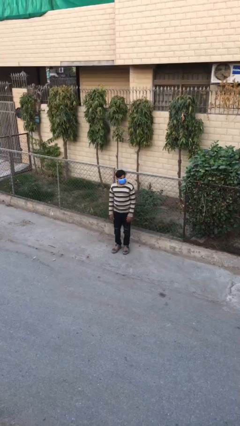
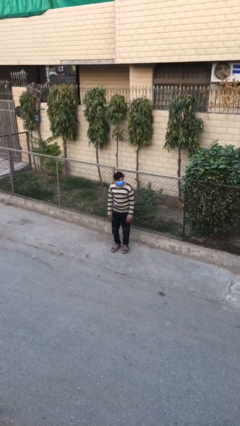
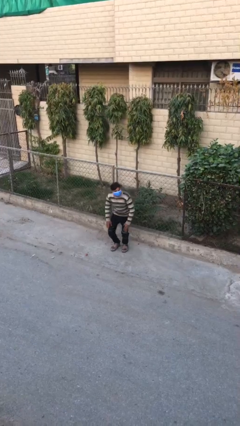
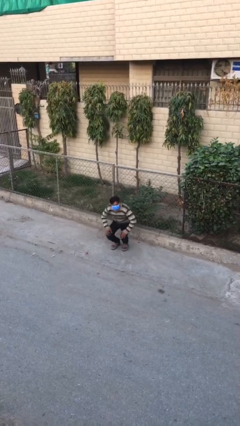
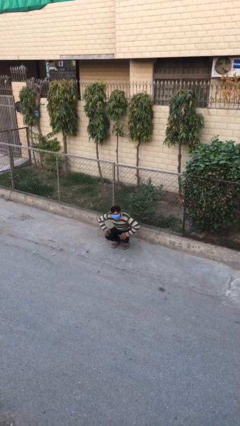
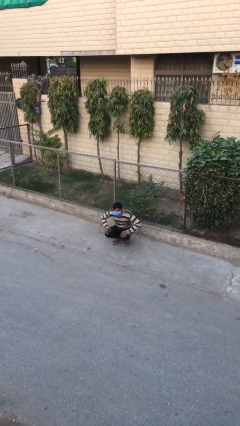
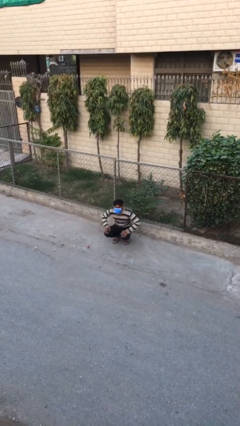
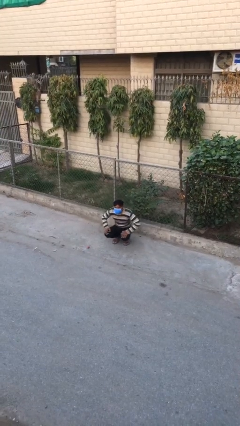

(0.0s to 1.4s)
person sits down

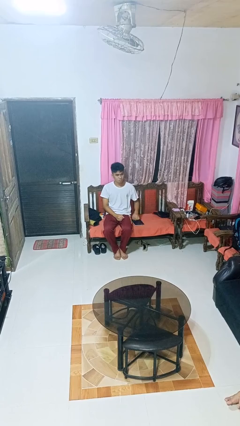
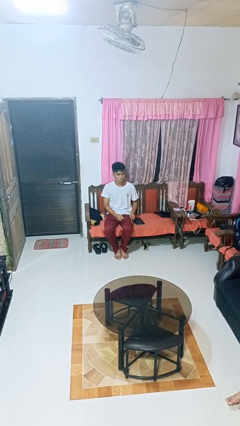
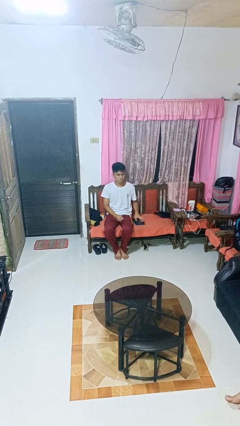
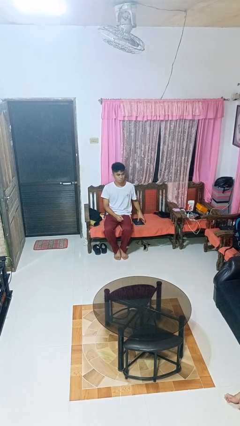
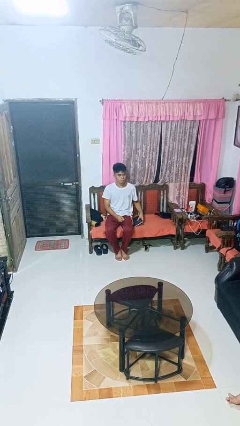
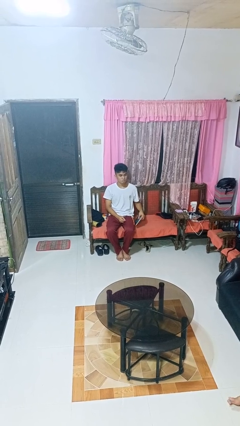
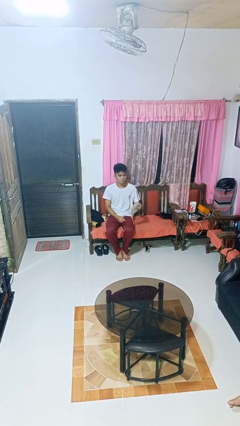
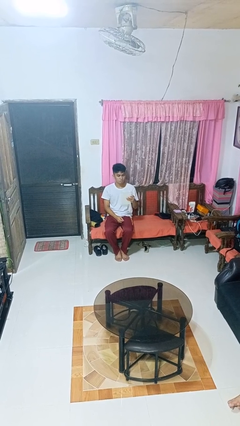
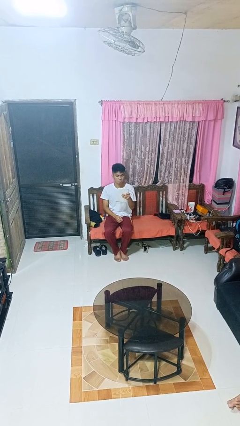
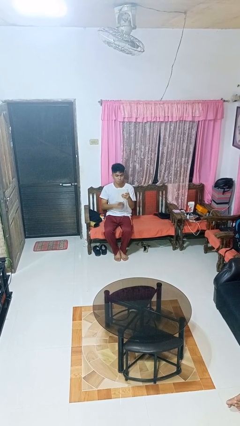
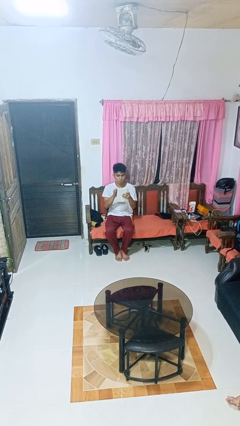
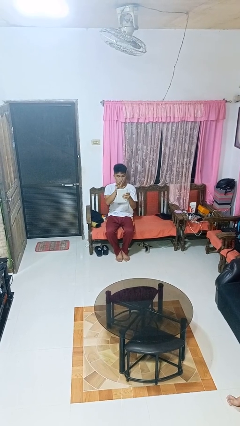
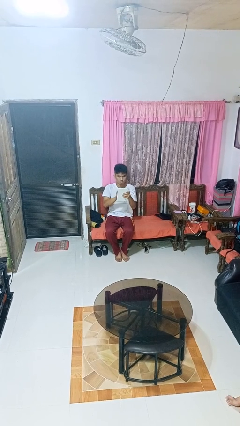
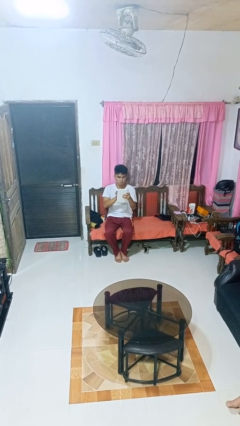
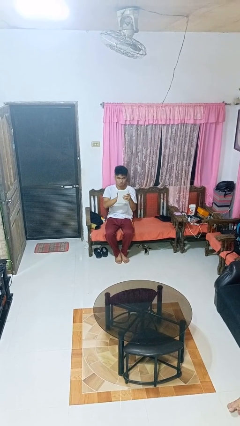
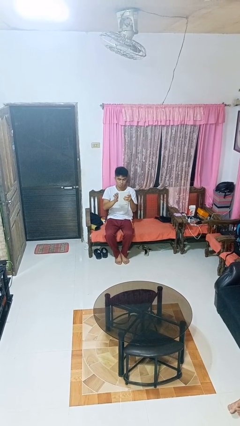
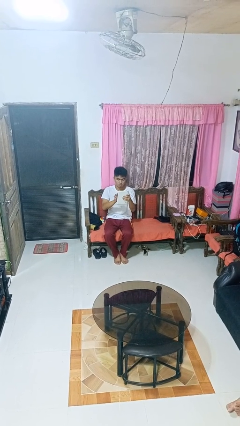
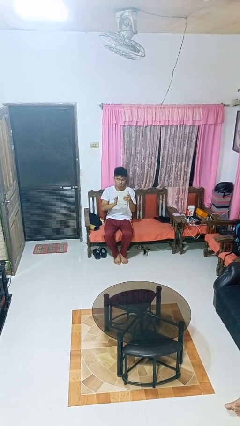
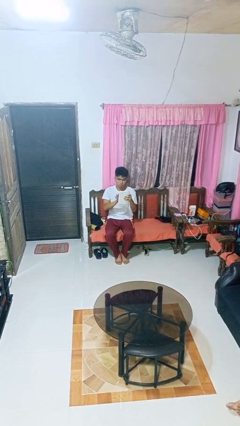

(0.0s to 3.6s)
person interacts with tablet

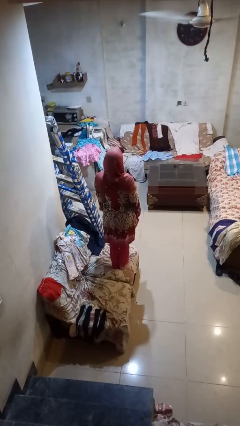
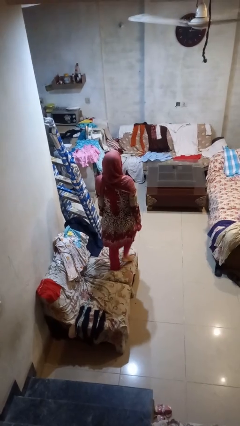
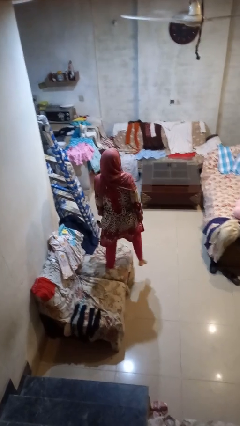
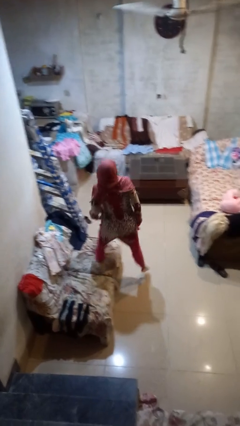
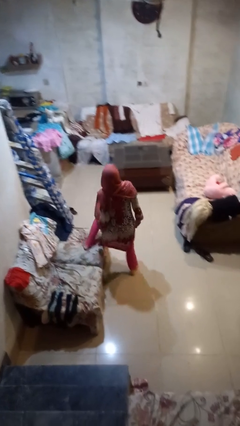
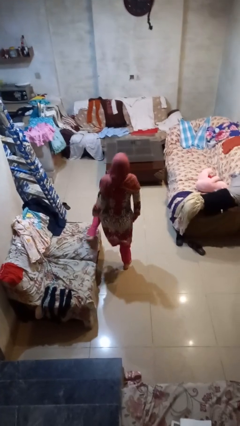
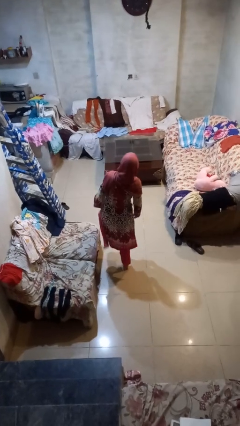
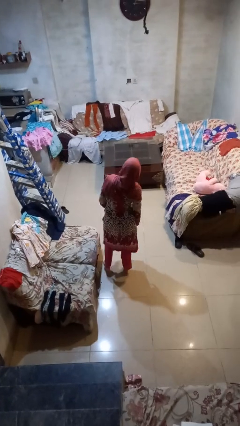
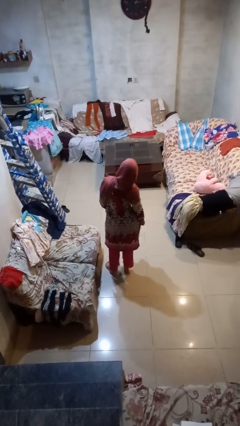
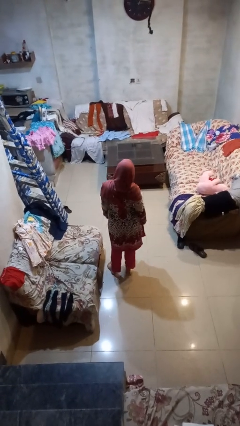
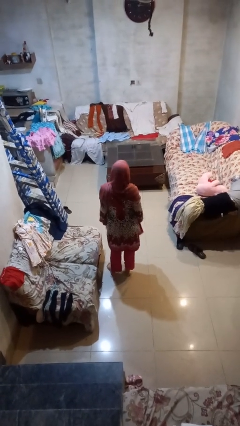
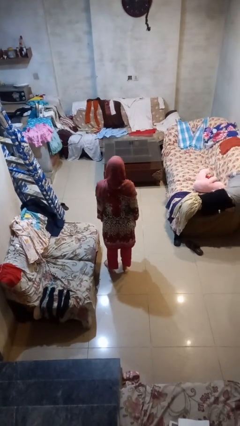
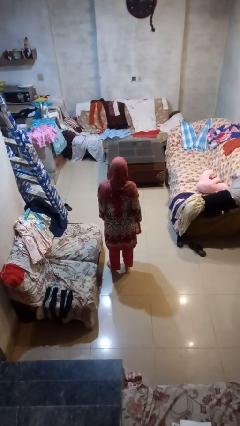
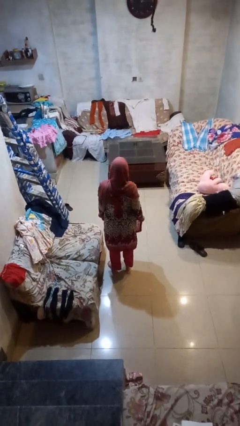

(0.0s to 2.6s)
person climbs off couch

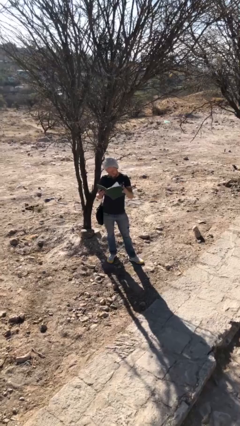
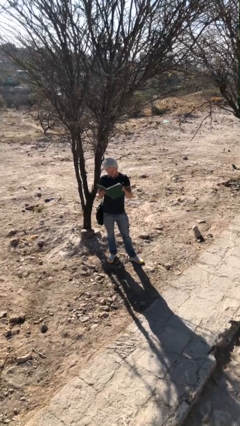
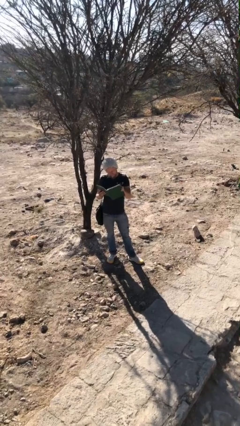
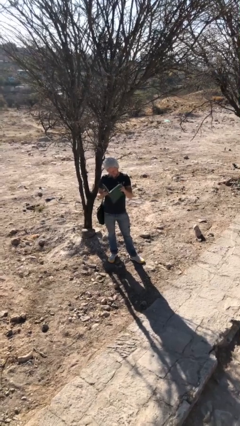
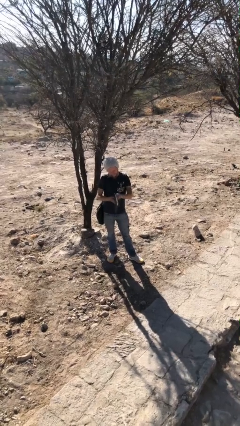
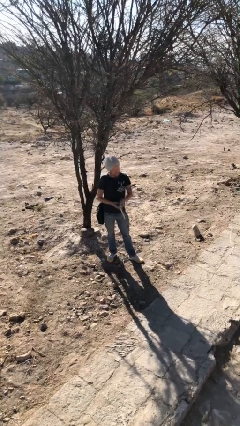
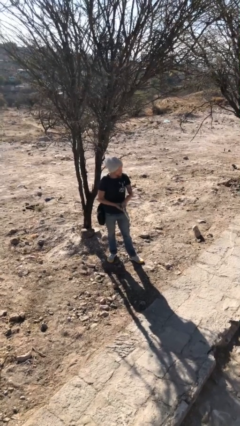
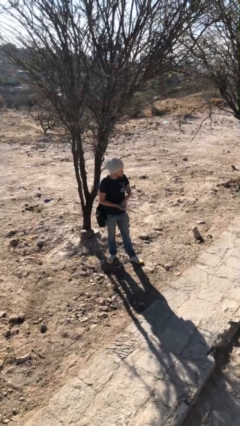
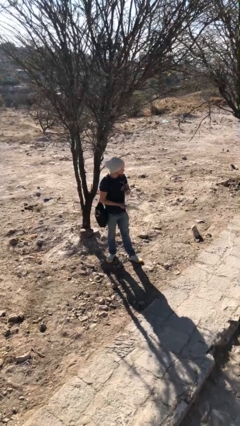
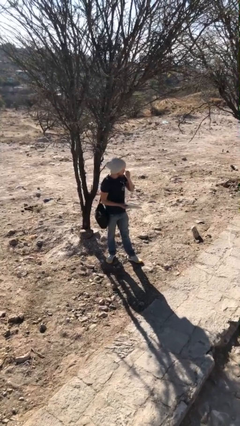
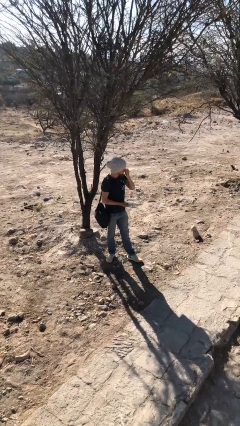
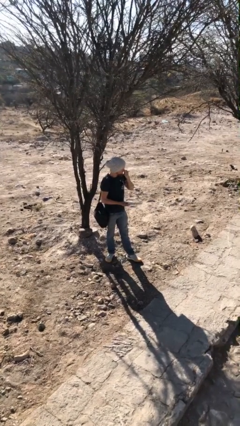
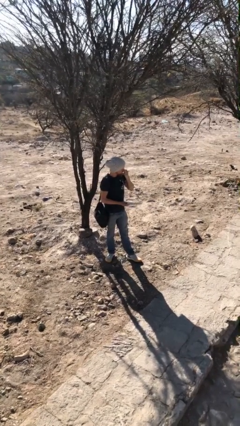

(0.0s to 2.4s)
person reads document

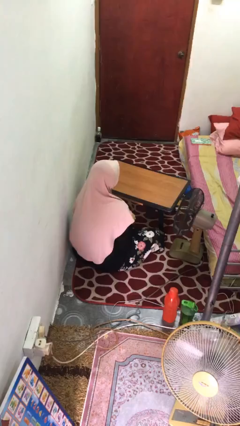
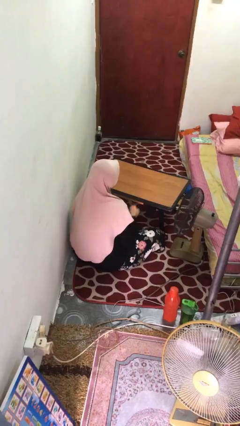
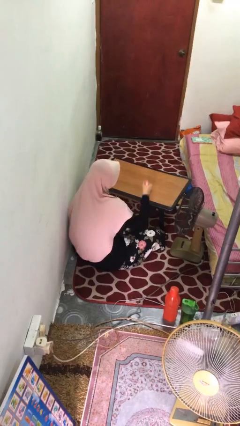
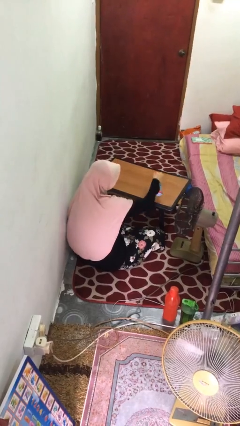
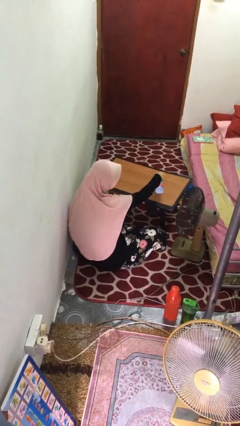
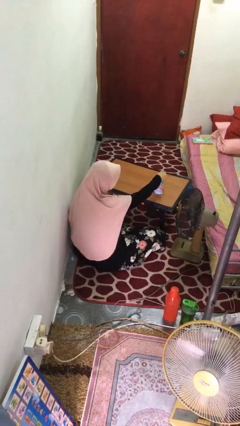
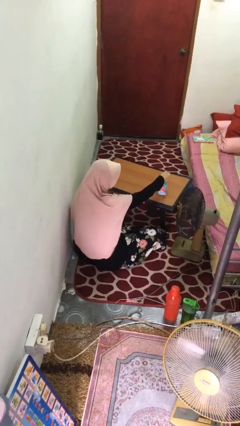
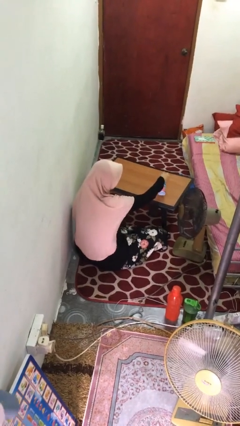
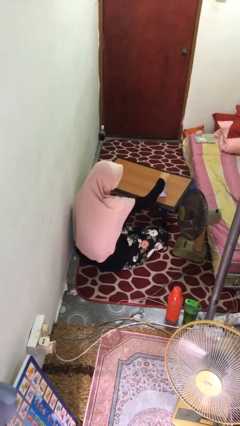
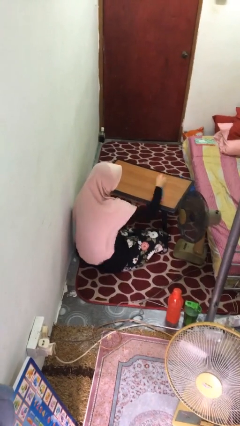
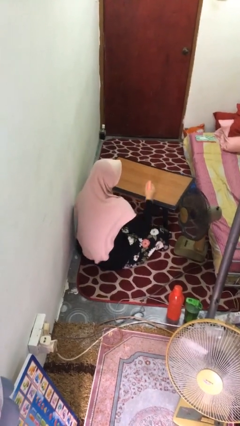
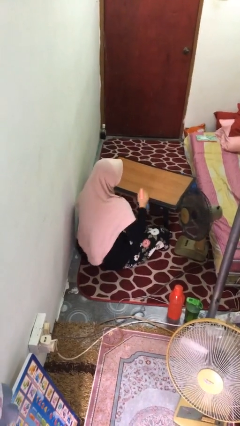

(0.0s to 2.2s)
person sprays from bottle

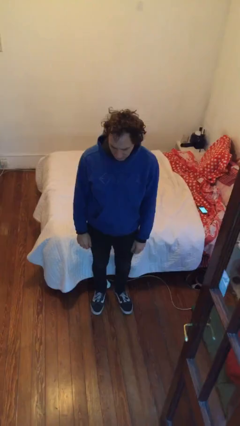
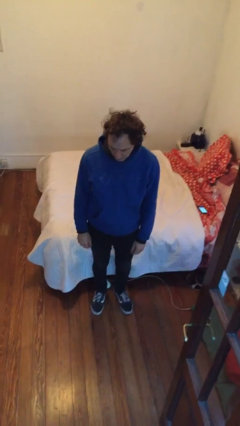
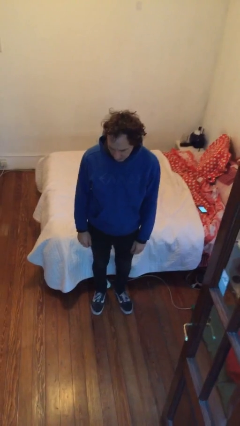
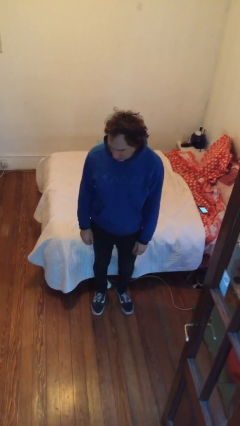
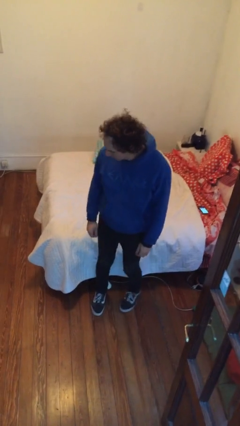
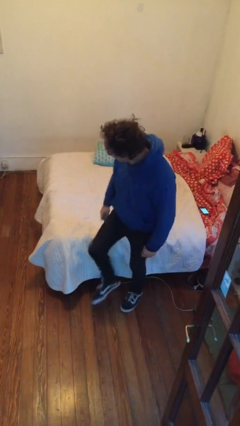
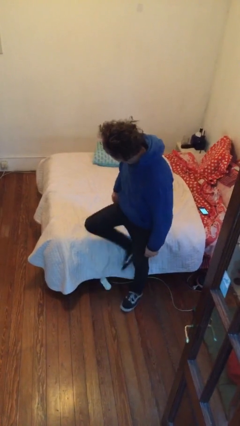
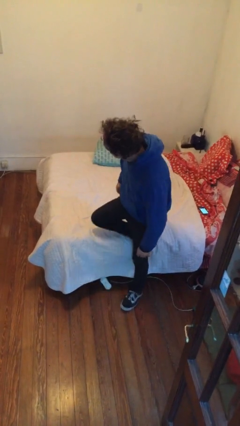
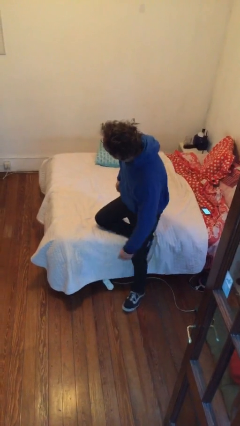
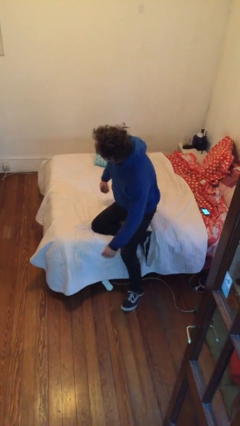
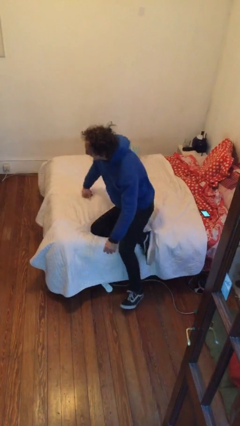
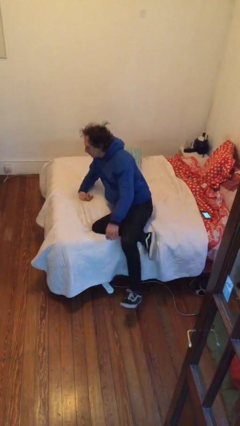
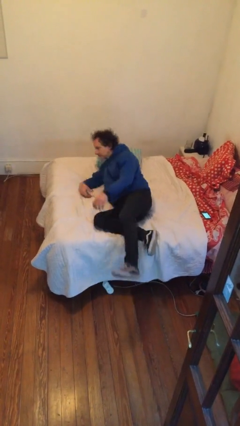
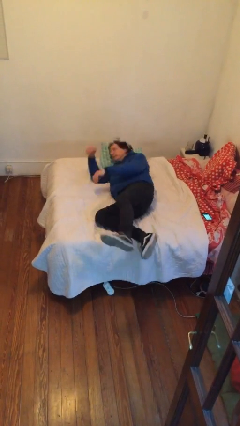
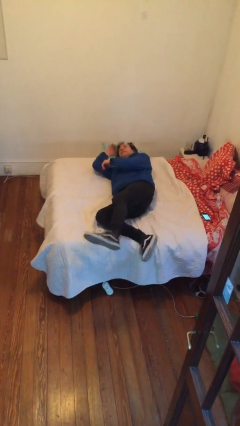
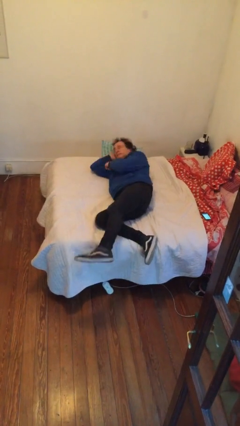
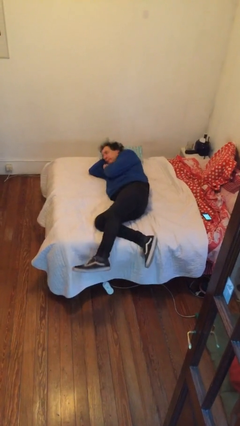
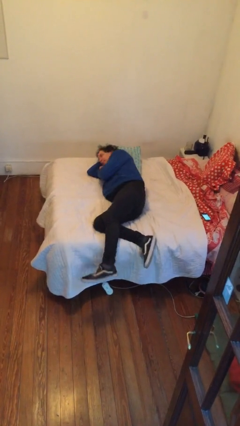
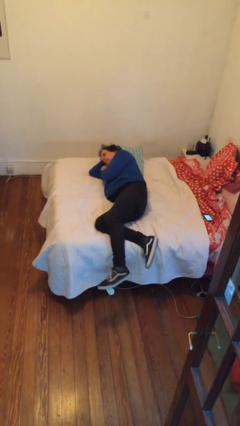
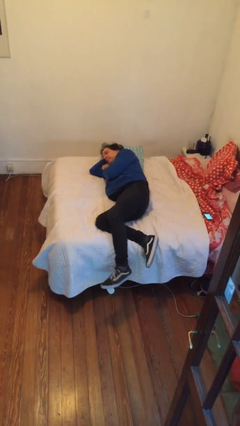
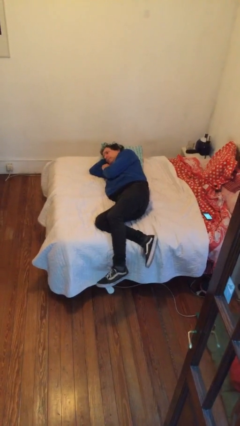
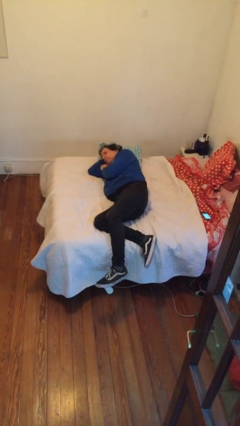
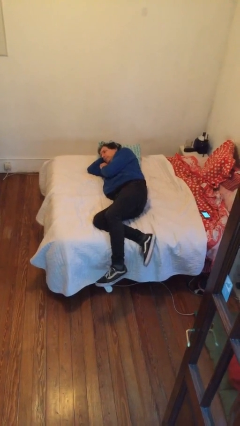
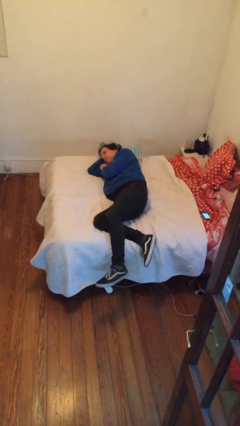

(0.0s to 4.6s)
person lies down on bed

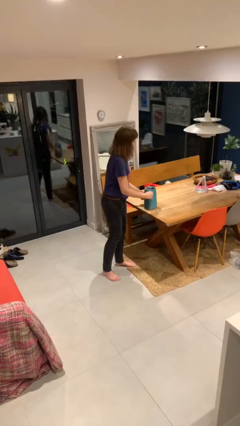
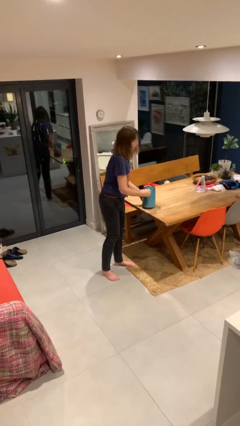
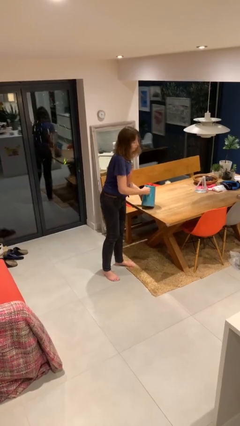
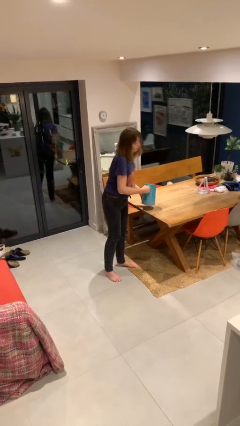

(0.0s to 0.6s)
person picks up object from table
